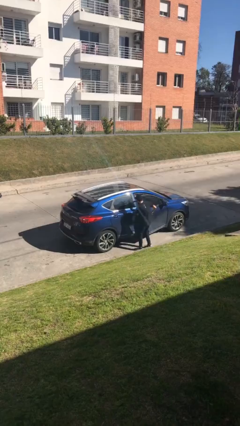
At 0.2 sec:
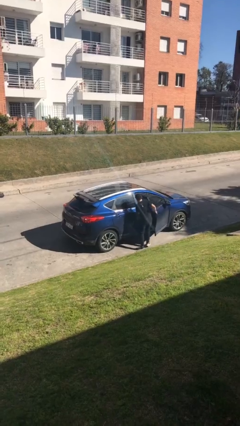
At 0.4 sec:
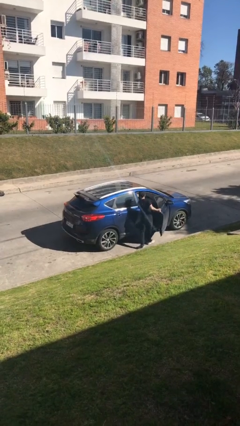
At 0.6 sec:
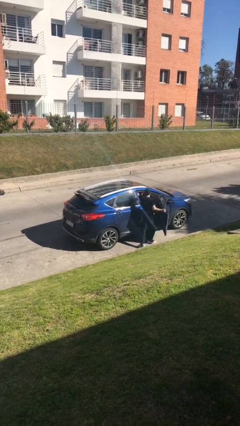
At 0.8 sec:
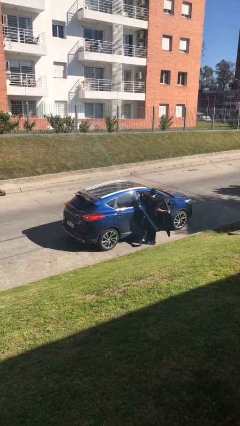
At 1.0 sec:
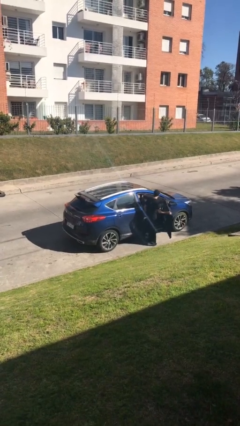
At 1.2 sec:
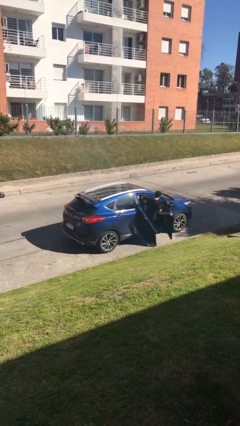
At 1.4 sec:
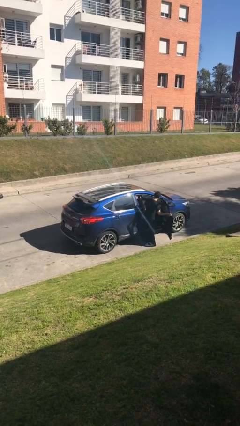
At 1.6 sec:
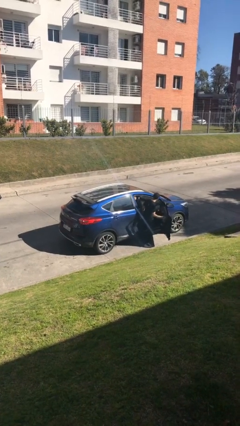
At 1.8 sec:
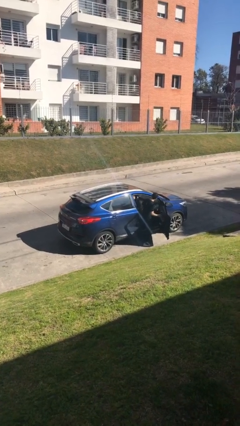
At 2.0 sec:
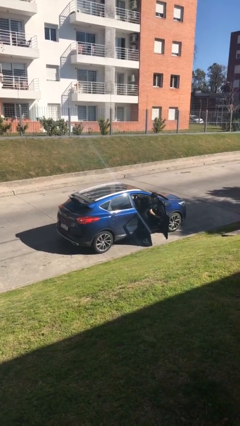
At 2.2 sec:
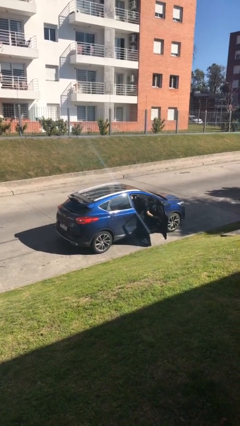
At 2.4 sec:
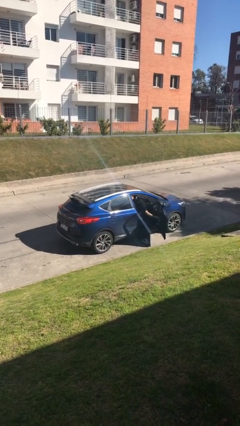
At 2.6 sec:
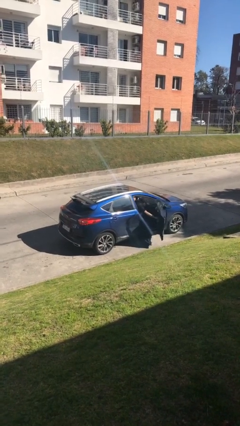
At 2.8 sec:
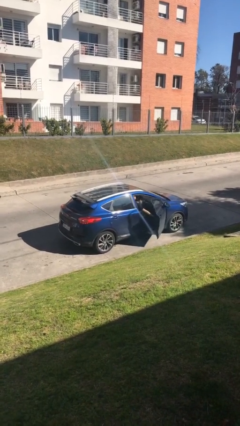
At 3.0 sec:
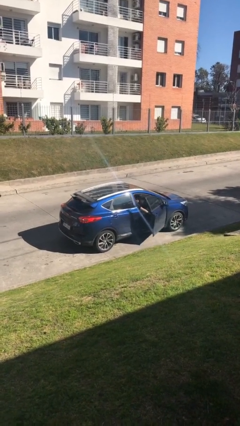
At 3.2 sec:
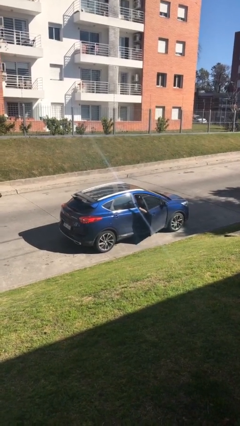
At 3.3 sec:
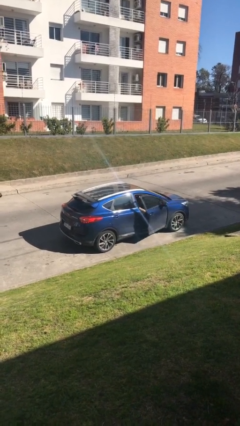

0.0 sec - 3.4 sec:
car picks up person

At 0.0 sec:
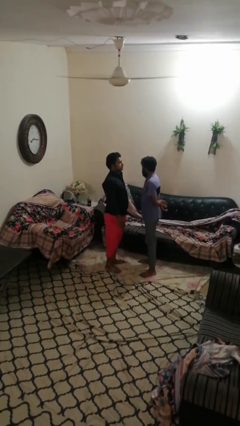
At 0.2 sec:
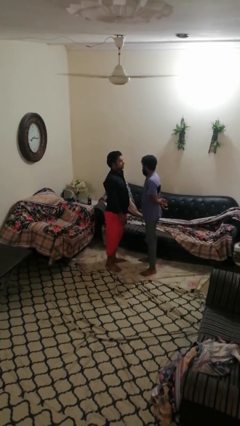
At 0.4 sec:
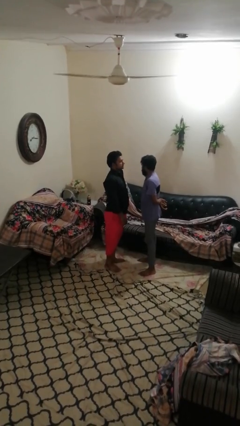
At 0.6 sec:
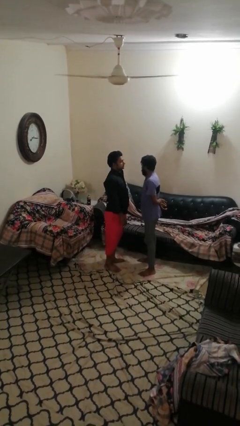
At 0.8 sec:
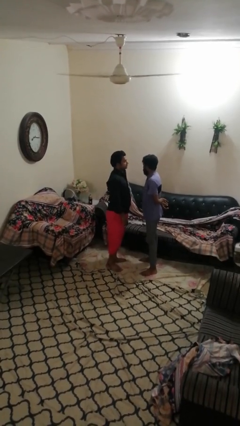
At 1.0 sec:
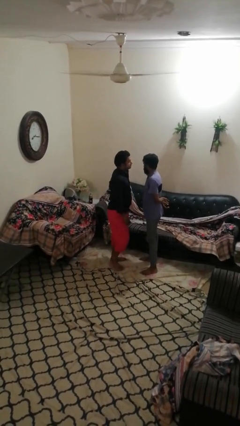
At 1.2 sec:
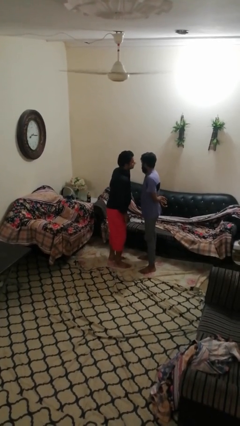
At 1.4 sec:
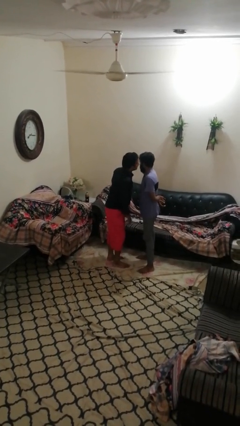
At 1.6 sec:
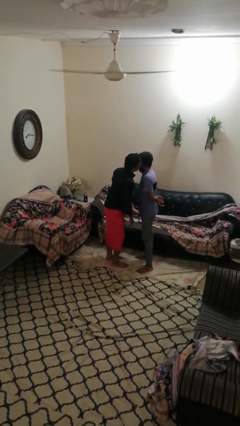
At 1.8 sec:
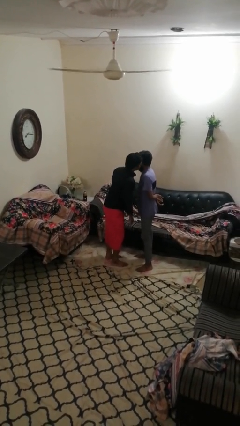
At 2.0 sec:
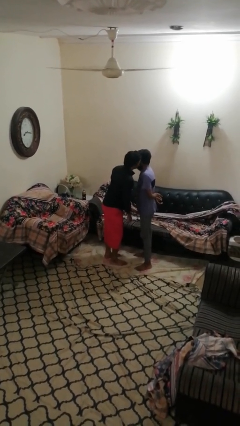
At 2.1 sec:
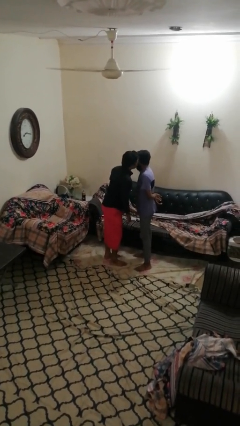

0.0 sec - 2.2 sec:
person kisses cheek of person

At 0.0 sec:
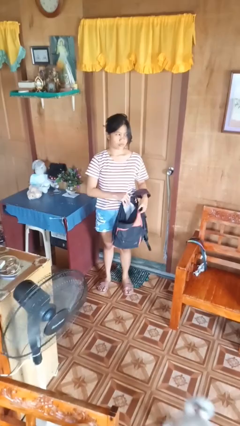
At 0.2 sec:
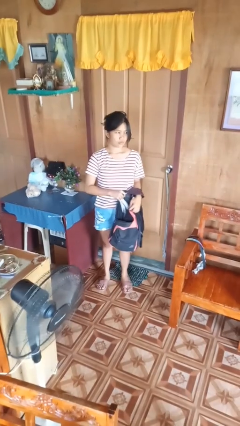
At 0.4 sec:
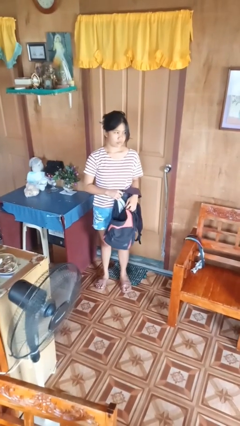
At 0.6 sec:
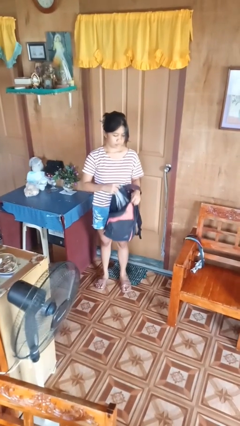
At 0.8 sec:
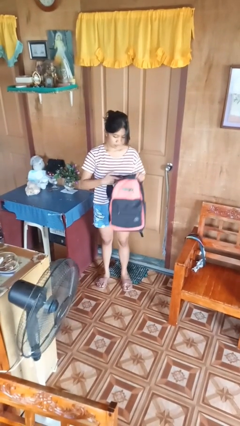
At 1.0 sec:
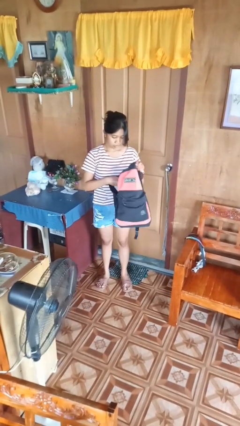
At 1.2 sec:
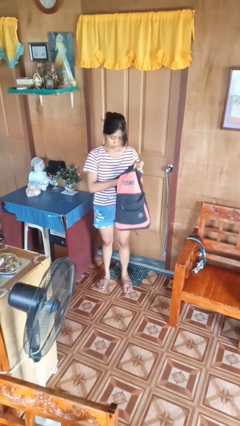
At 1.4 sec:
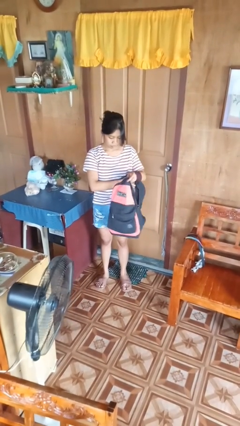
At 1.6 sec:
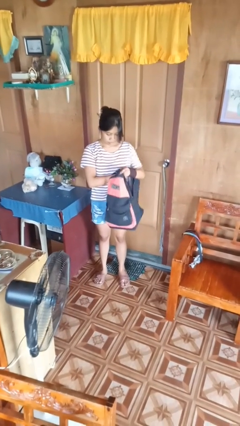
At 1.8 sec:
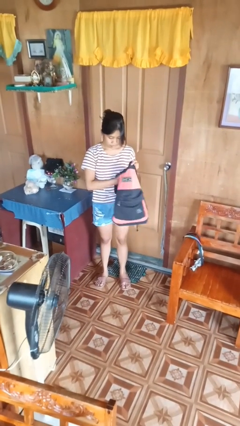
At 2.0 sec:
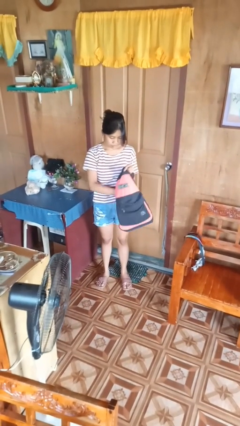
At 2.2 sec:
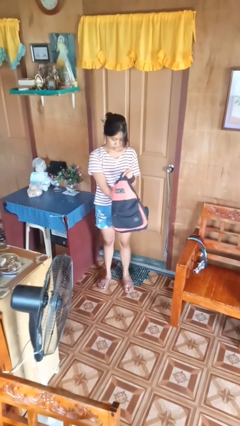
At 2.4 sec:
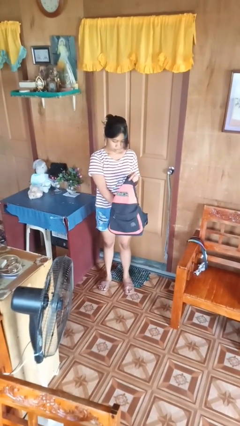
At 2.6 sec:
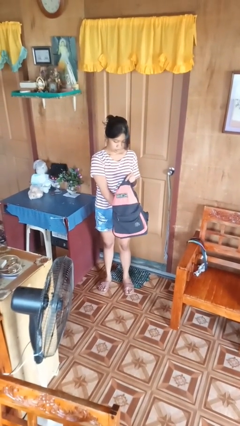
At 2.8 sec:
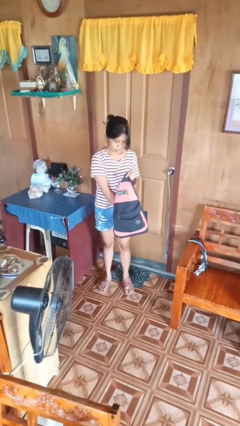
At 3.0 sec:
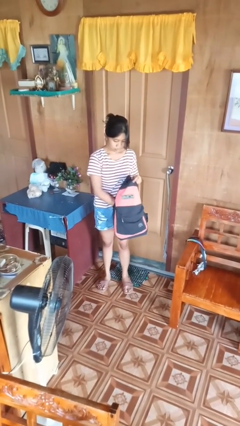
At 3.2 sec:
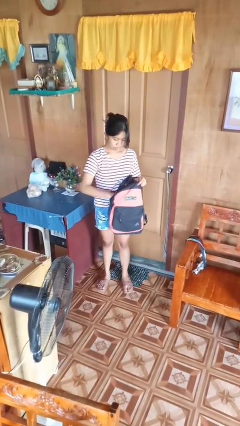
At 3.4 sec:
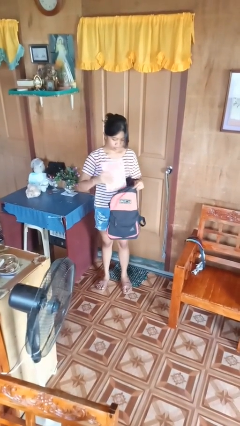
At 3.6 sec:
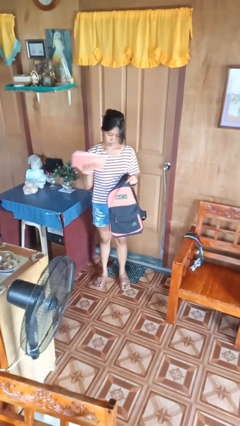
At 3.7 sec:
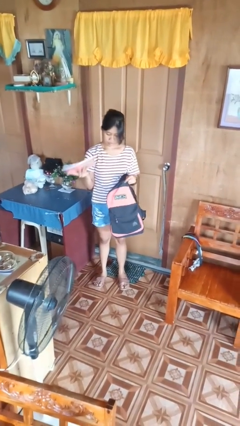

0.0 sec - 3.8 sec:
person searches in backpack

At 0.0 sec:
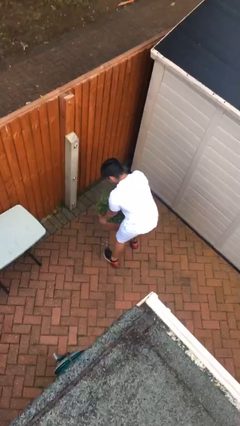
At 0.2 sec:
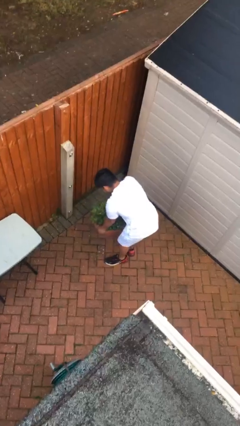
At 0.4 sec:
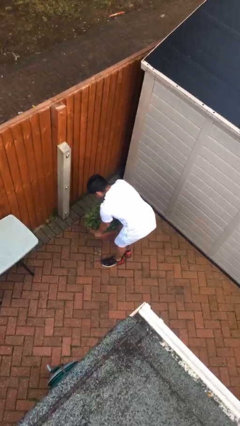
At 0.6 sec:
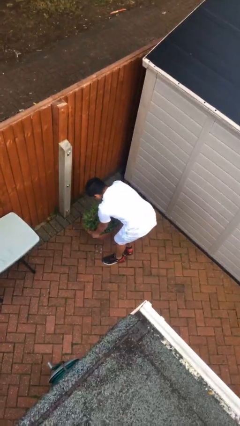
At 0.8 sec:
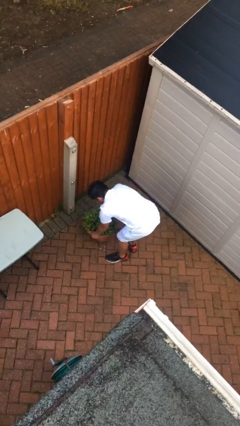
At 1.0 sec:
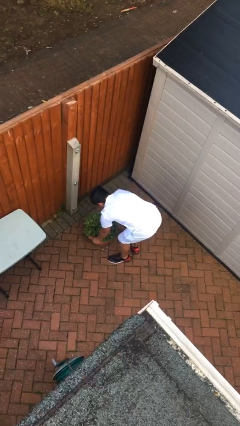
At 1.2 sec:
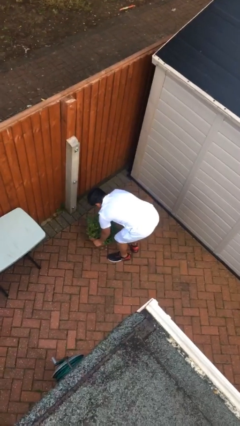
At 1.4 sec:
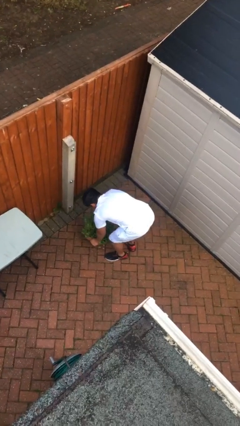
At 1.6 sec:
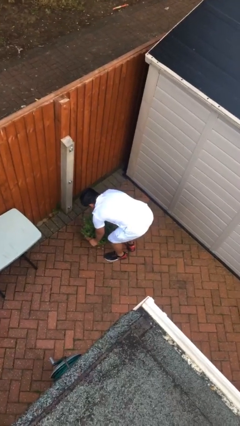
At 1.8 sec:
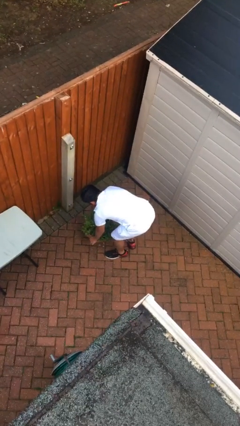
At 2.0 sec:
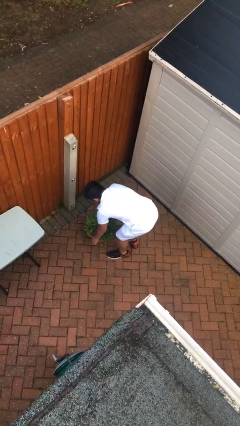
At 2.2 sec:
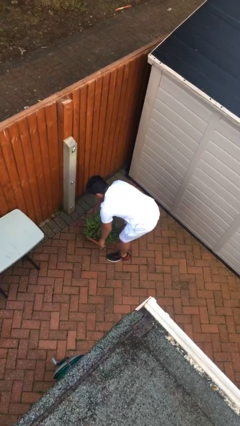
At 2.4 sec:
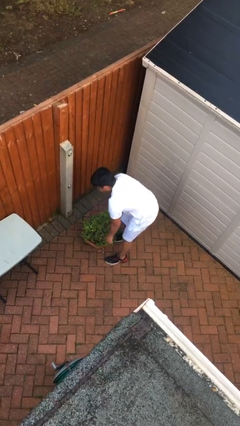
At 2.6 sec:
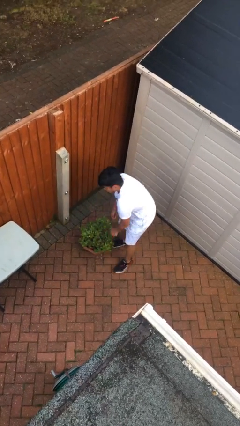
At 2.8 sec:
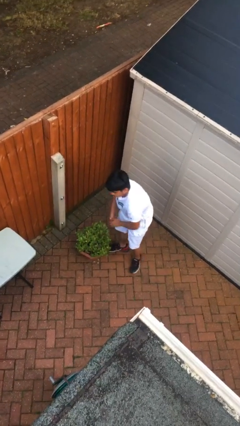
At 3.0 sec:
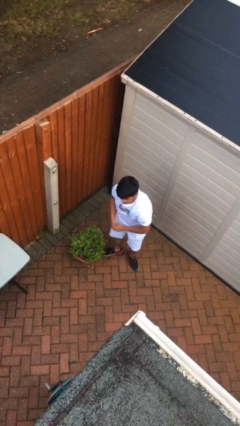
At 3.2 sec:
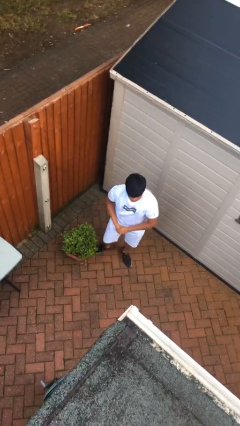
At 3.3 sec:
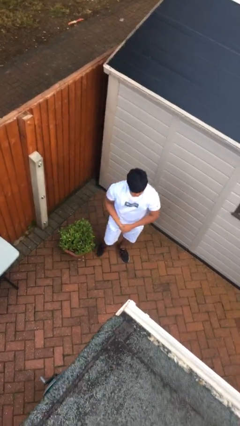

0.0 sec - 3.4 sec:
person puts down object on floor

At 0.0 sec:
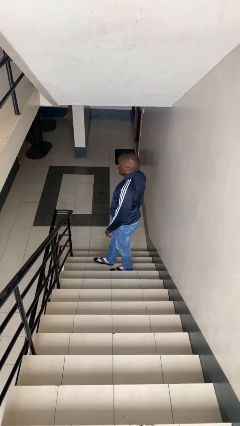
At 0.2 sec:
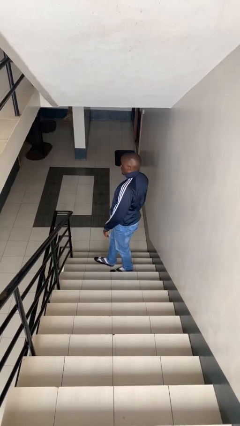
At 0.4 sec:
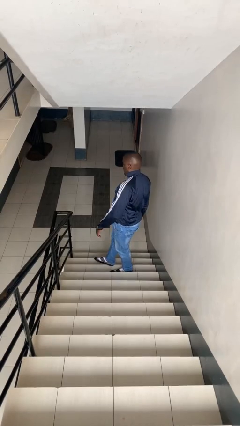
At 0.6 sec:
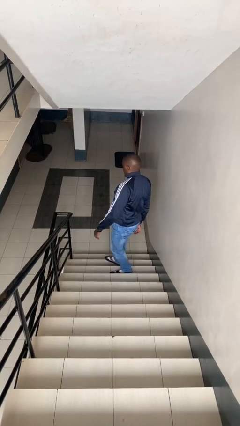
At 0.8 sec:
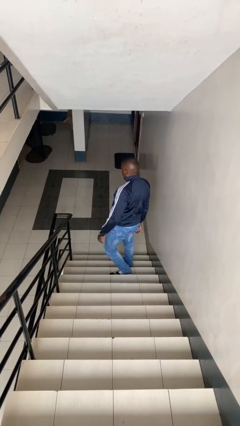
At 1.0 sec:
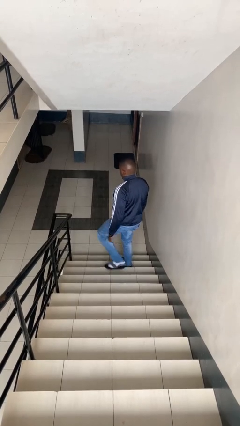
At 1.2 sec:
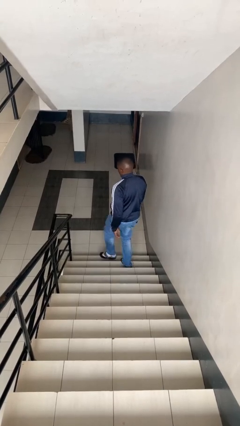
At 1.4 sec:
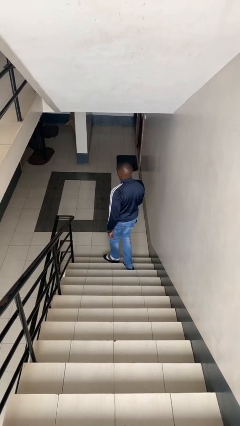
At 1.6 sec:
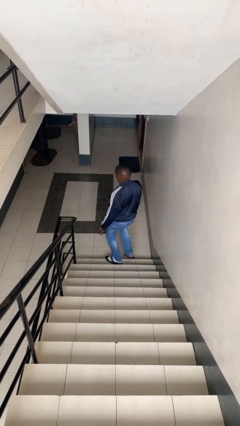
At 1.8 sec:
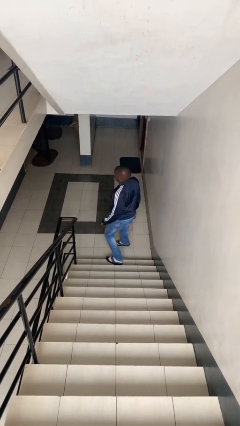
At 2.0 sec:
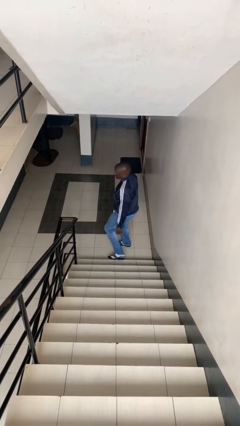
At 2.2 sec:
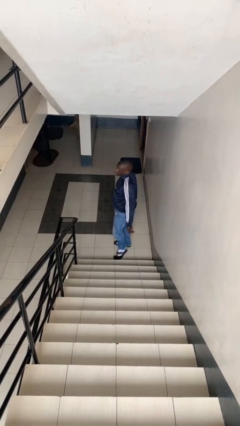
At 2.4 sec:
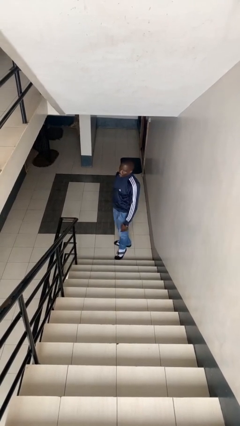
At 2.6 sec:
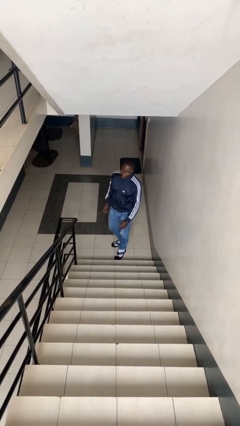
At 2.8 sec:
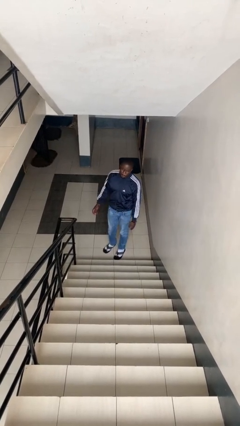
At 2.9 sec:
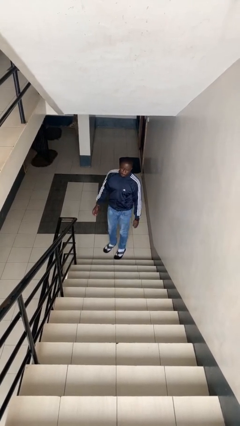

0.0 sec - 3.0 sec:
person climbs down stairs

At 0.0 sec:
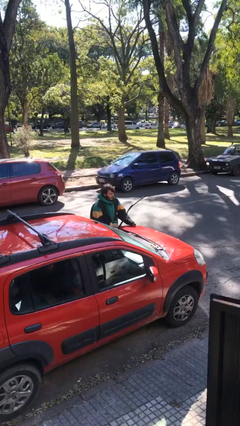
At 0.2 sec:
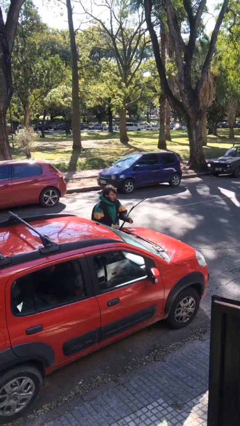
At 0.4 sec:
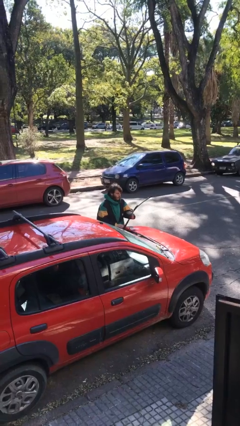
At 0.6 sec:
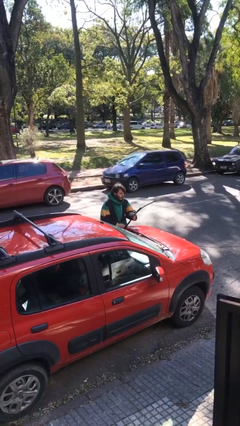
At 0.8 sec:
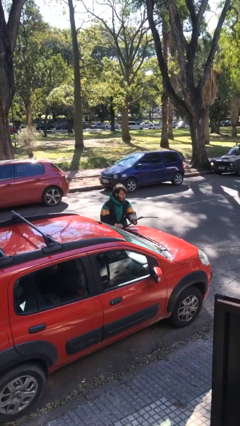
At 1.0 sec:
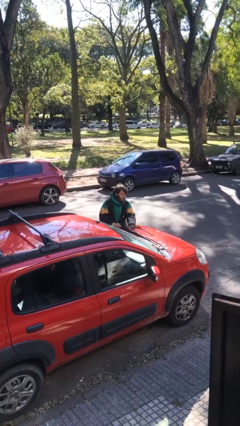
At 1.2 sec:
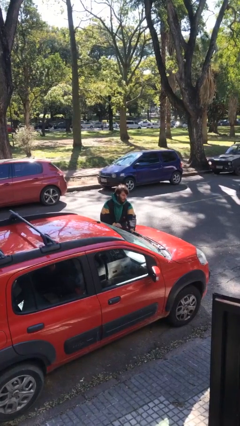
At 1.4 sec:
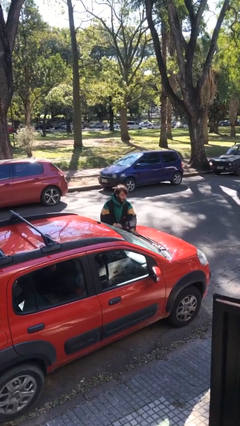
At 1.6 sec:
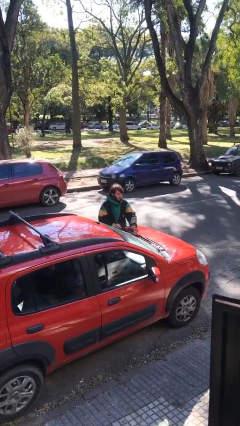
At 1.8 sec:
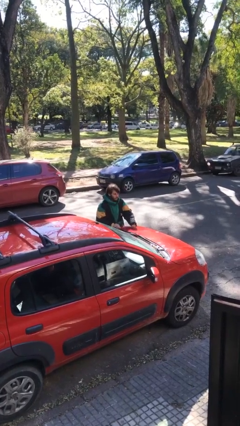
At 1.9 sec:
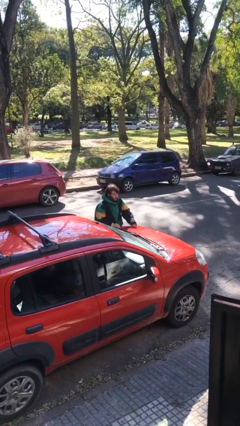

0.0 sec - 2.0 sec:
person flips down car wipers
